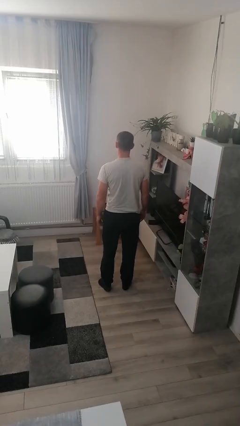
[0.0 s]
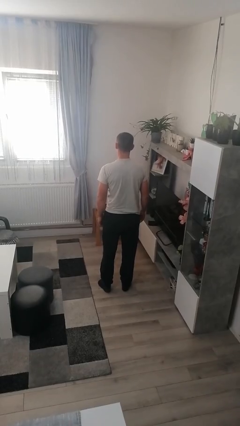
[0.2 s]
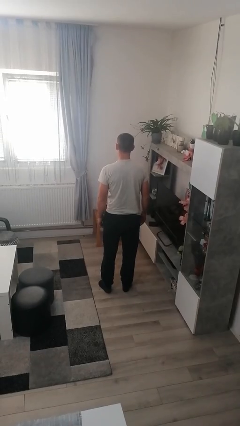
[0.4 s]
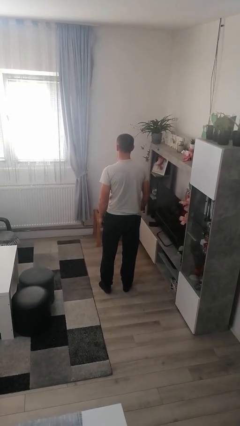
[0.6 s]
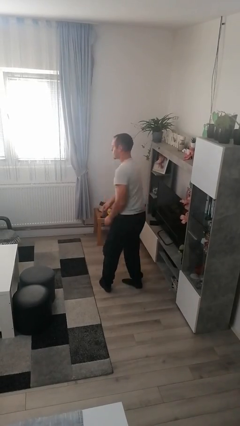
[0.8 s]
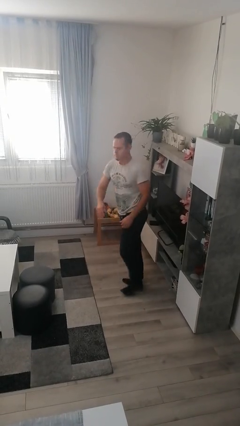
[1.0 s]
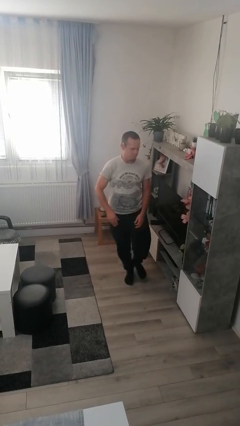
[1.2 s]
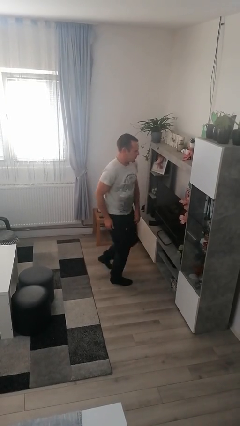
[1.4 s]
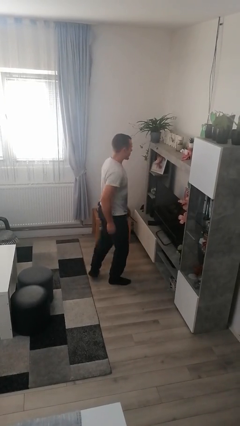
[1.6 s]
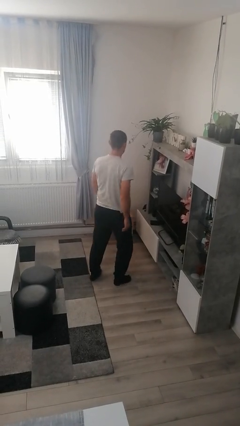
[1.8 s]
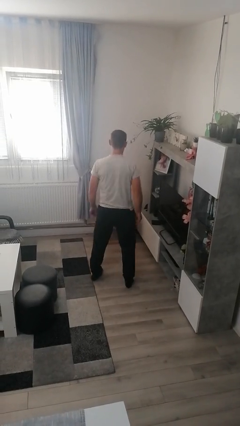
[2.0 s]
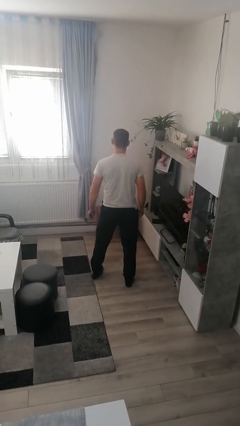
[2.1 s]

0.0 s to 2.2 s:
person twirls

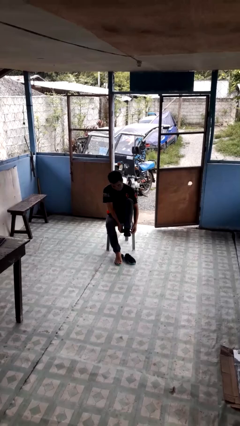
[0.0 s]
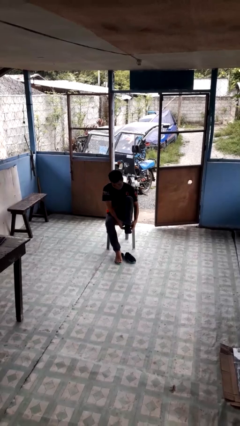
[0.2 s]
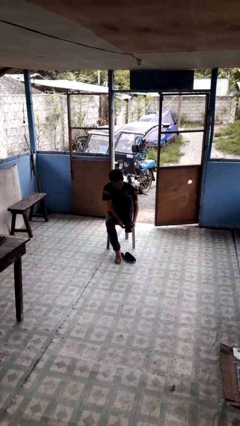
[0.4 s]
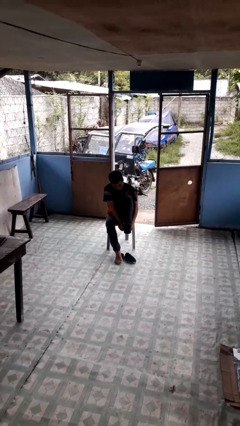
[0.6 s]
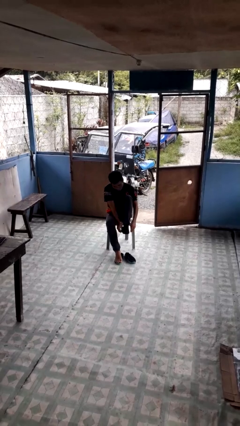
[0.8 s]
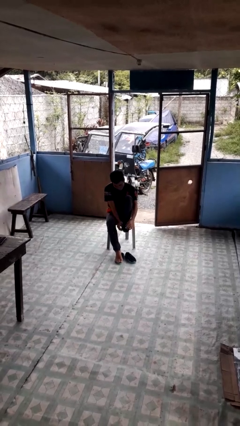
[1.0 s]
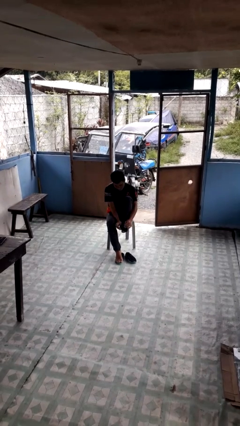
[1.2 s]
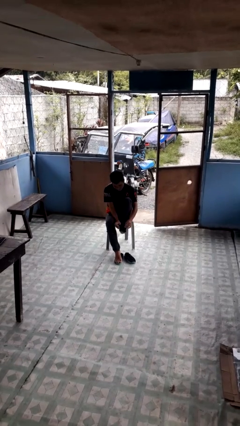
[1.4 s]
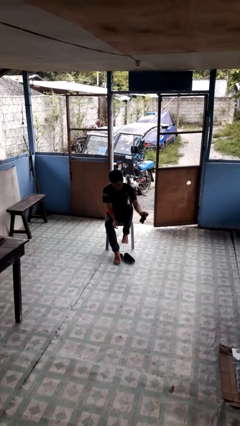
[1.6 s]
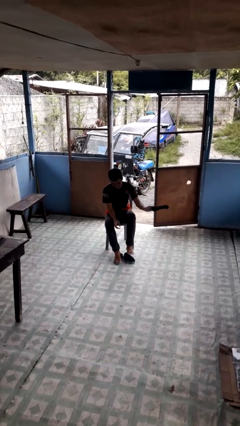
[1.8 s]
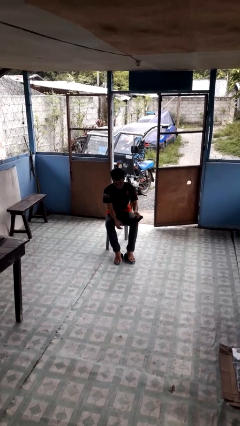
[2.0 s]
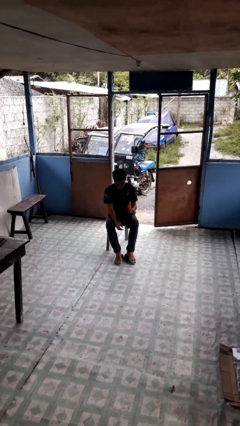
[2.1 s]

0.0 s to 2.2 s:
person takes off socks

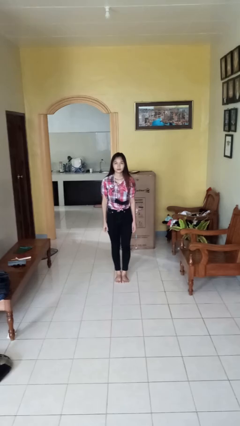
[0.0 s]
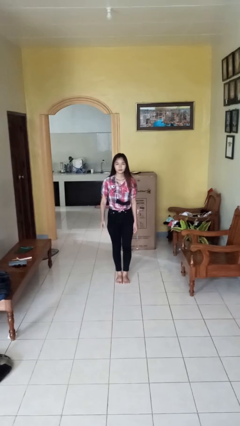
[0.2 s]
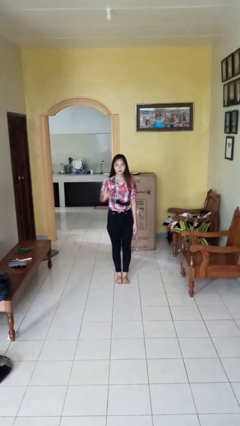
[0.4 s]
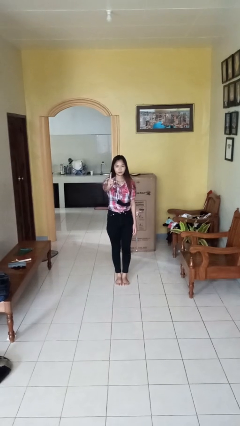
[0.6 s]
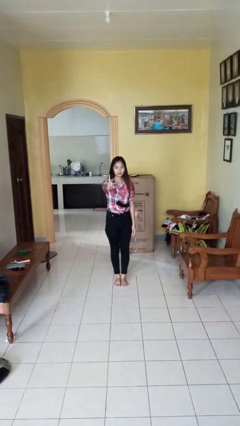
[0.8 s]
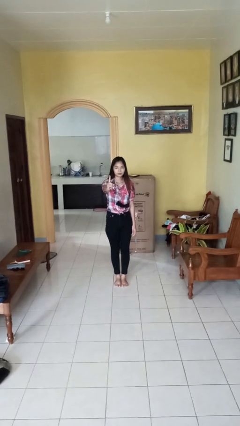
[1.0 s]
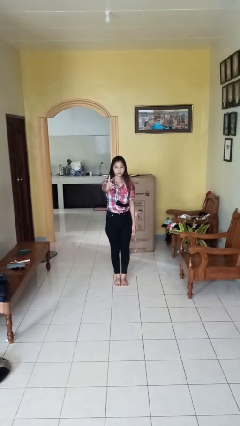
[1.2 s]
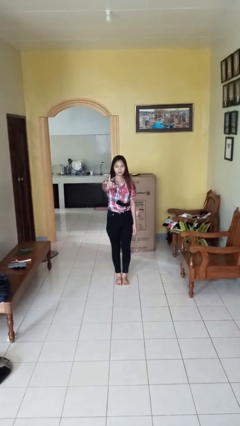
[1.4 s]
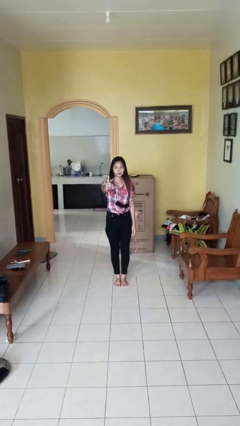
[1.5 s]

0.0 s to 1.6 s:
person gestures number one

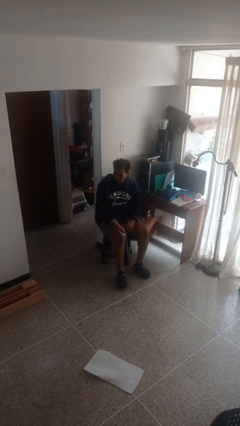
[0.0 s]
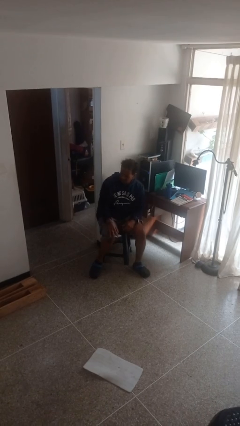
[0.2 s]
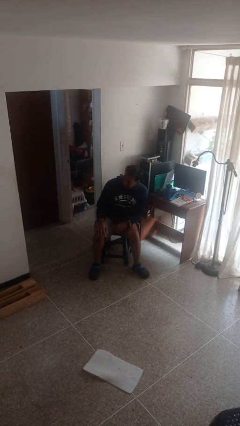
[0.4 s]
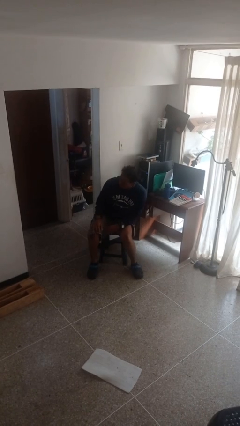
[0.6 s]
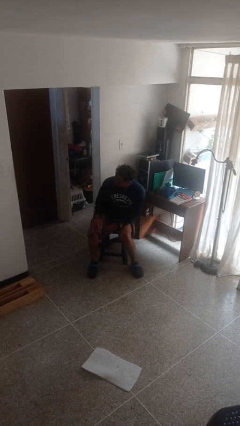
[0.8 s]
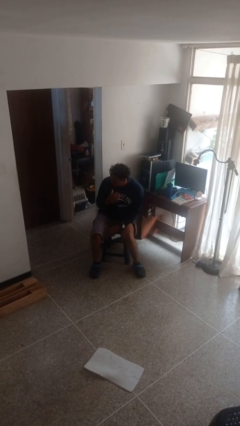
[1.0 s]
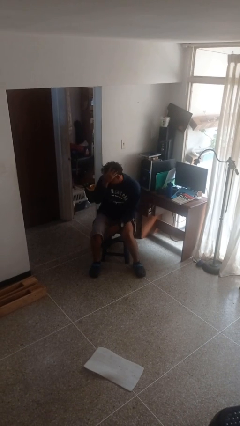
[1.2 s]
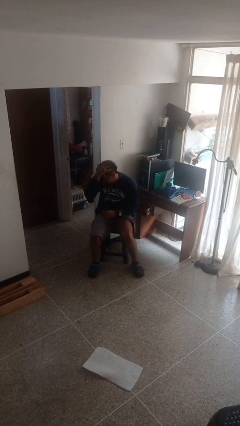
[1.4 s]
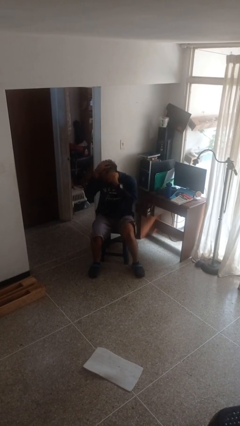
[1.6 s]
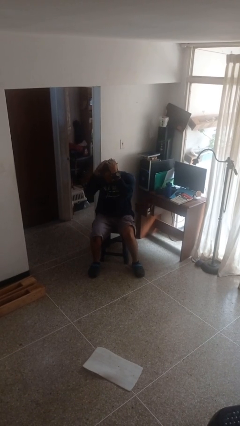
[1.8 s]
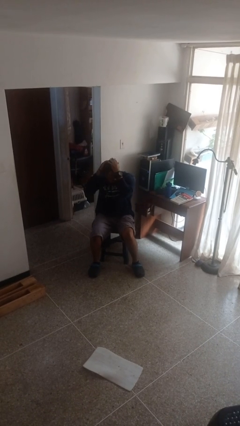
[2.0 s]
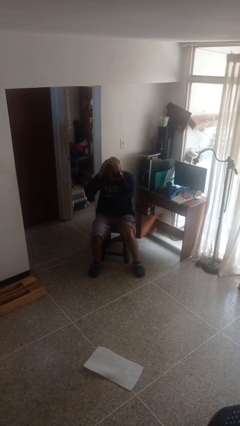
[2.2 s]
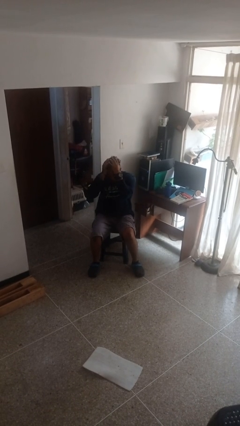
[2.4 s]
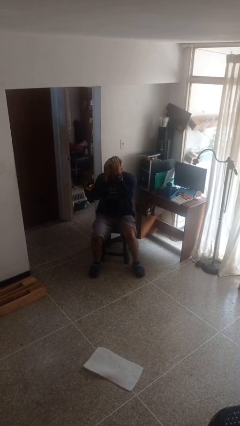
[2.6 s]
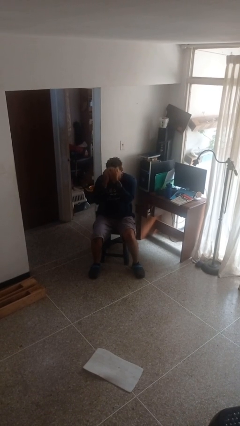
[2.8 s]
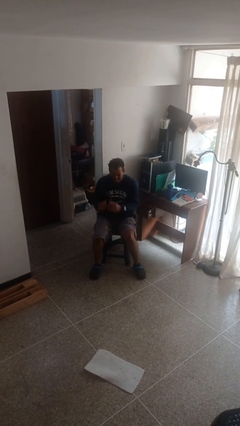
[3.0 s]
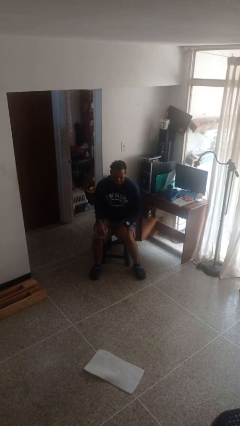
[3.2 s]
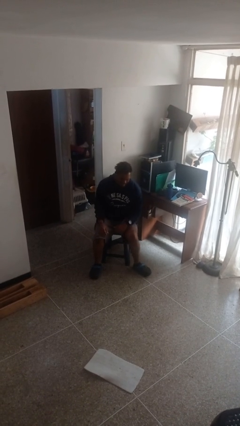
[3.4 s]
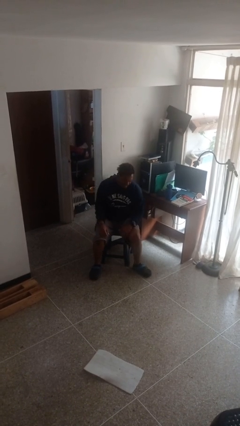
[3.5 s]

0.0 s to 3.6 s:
person scratches face

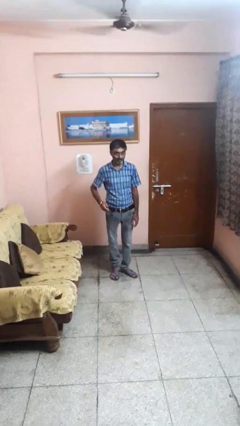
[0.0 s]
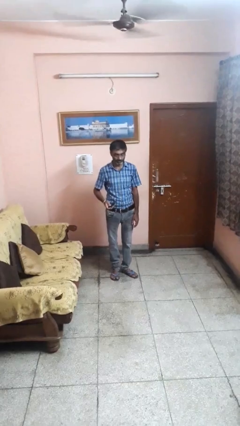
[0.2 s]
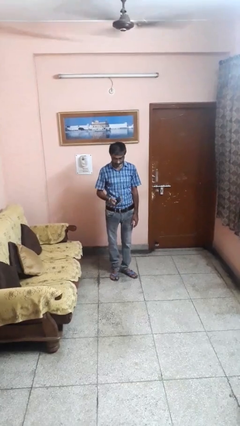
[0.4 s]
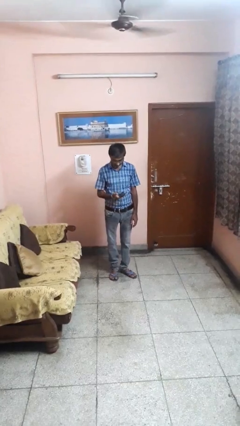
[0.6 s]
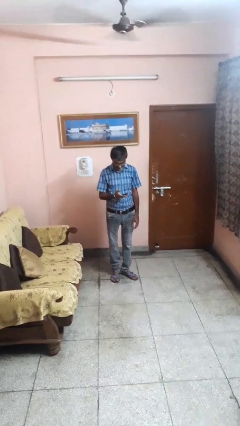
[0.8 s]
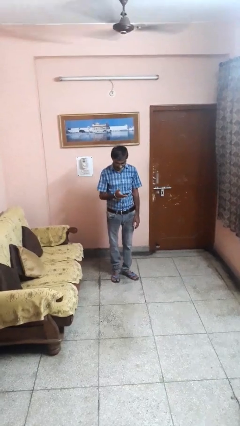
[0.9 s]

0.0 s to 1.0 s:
person takes phone from pocket

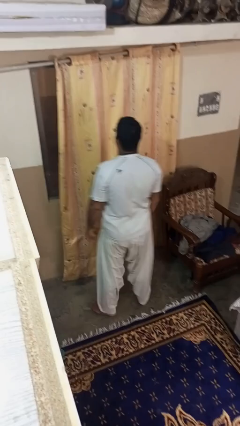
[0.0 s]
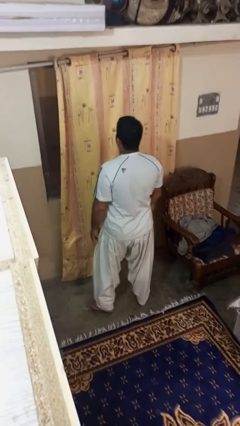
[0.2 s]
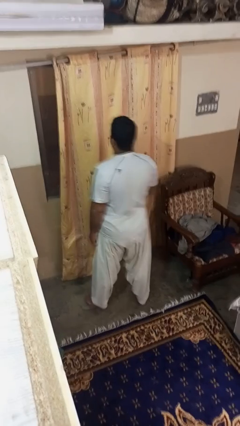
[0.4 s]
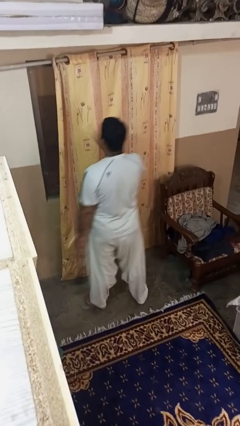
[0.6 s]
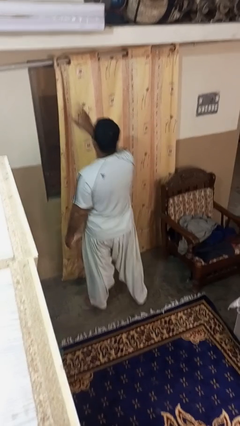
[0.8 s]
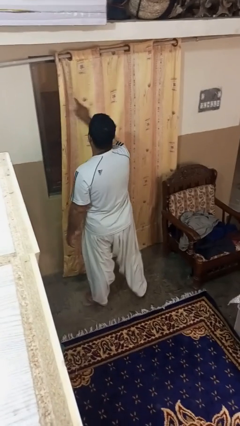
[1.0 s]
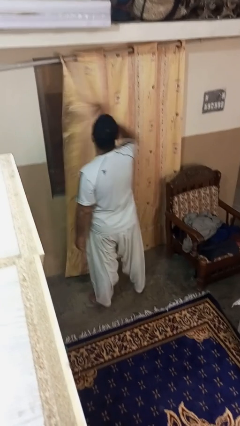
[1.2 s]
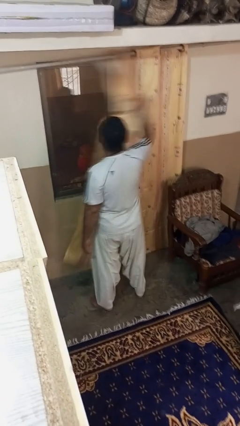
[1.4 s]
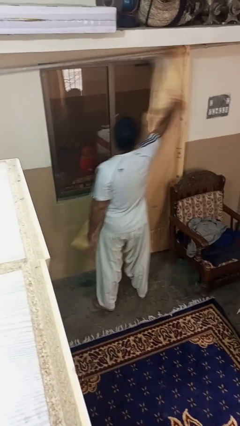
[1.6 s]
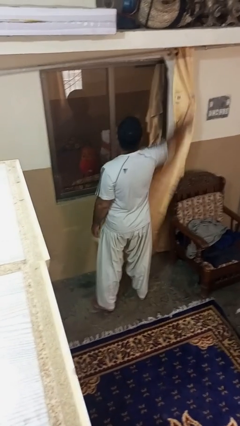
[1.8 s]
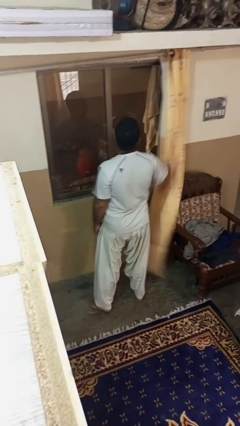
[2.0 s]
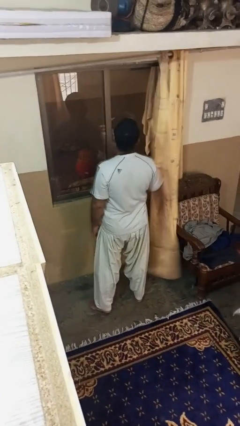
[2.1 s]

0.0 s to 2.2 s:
person opens curtains

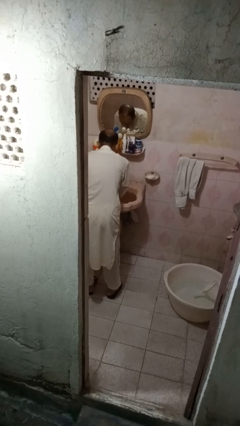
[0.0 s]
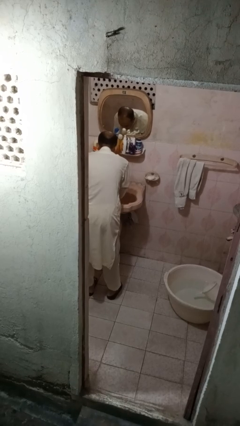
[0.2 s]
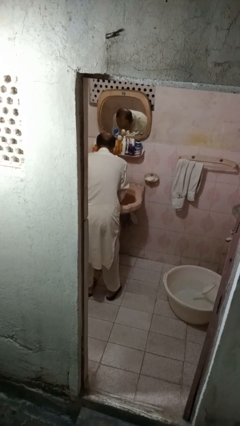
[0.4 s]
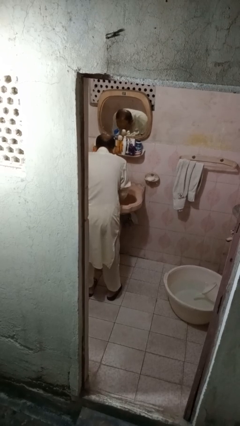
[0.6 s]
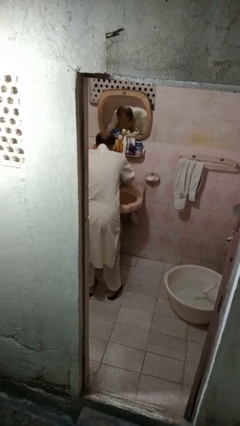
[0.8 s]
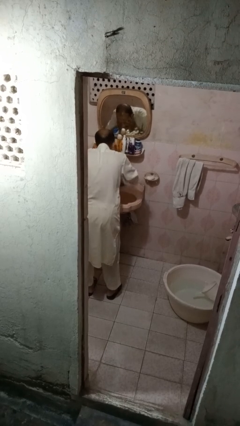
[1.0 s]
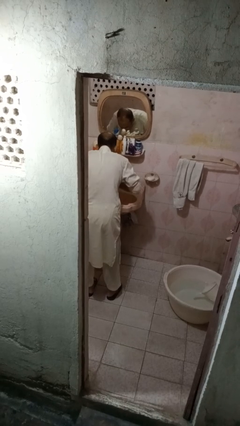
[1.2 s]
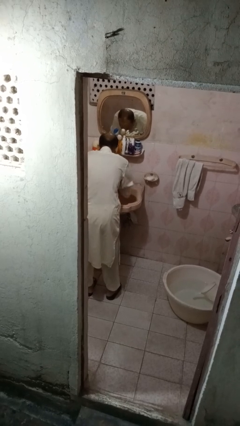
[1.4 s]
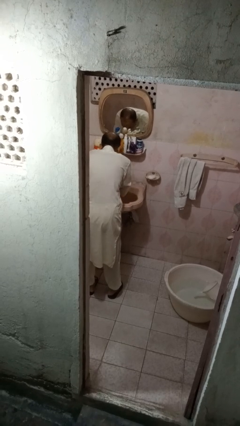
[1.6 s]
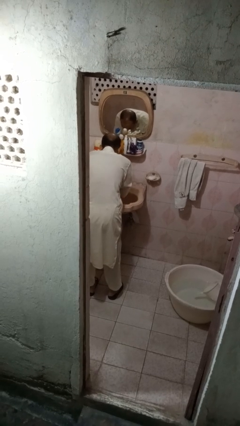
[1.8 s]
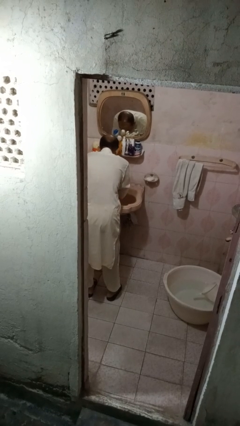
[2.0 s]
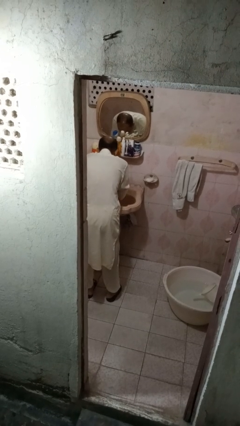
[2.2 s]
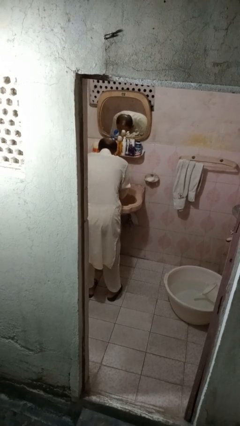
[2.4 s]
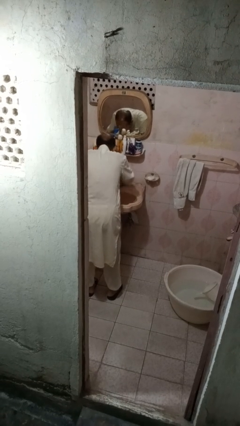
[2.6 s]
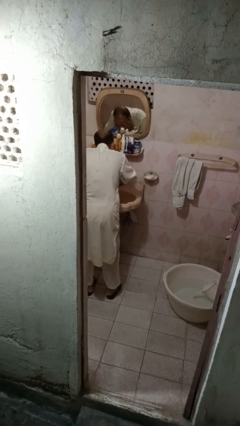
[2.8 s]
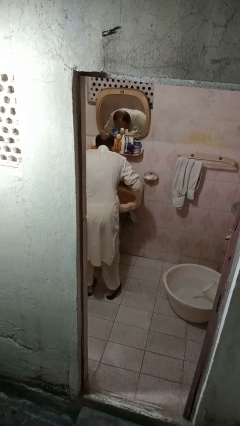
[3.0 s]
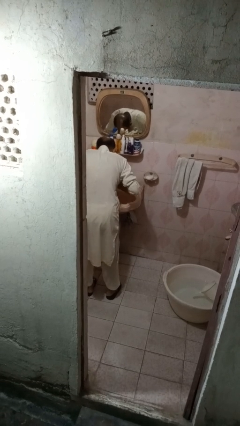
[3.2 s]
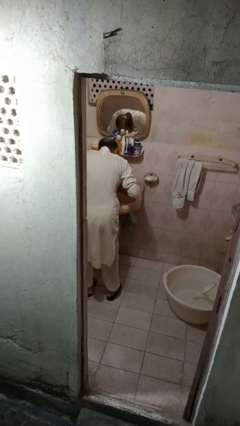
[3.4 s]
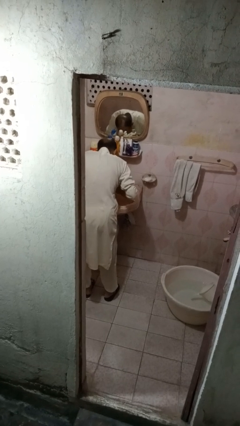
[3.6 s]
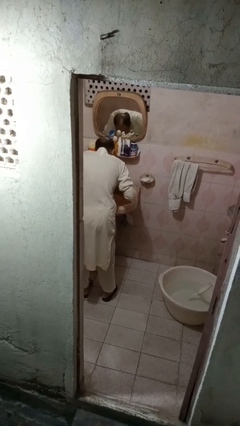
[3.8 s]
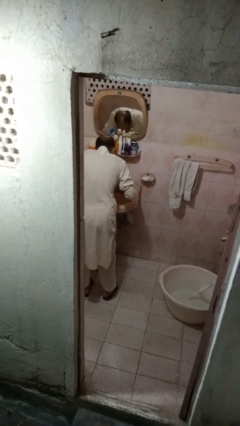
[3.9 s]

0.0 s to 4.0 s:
person washes face
